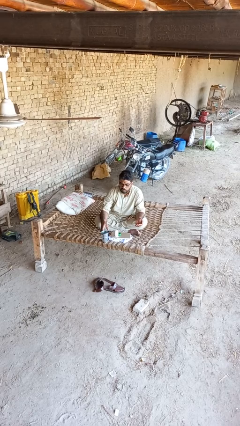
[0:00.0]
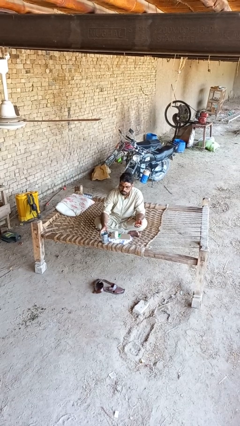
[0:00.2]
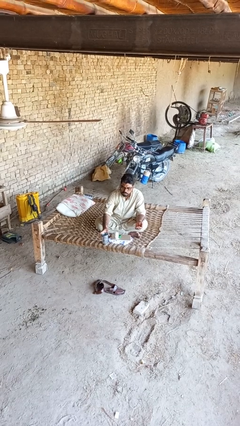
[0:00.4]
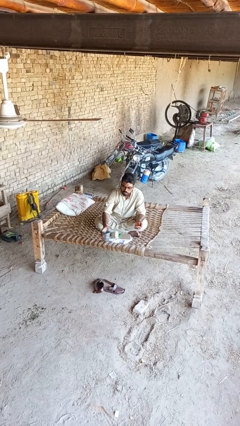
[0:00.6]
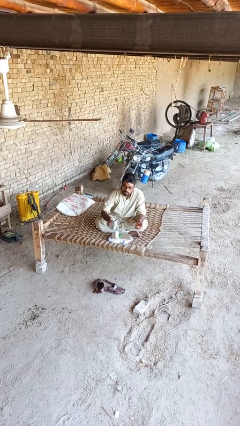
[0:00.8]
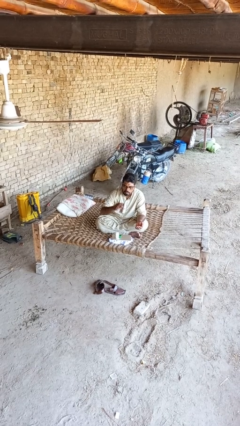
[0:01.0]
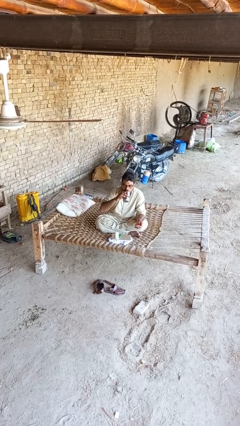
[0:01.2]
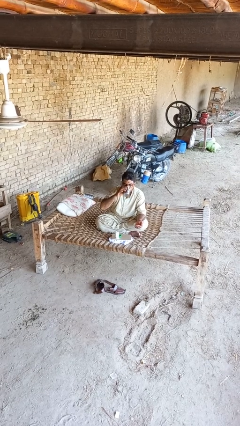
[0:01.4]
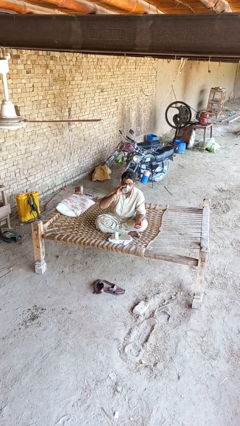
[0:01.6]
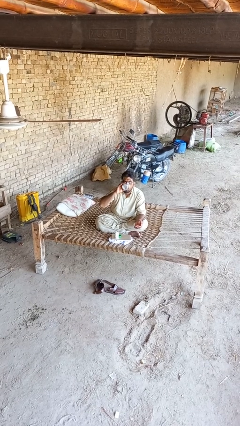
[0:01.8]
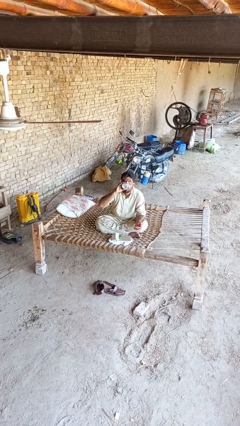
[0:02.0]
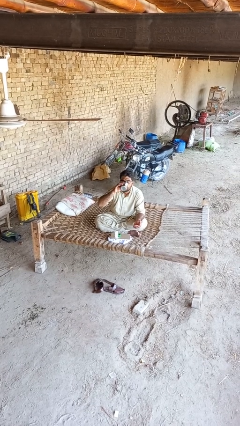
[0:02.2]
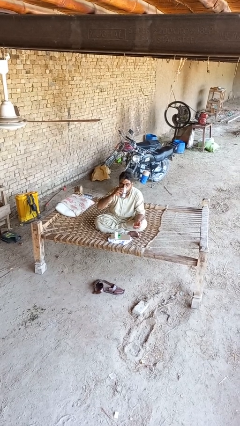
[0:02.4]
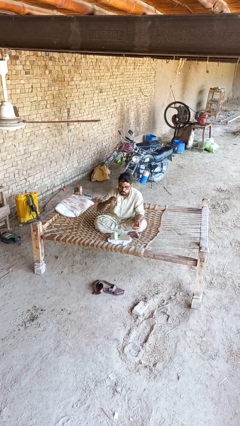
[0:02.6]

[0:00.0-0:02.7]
person drinks from cup

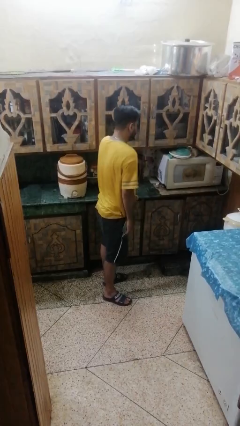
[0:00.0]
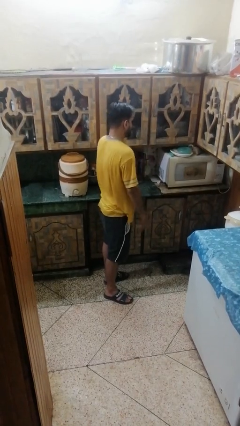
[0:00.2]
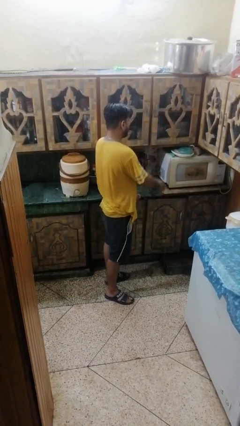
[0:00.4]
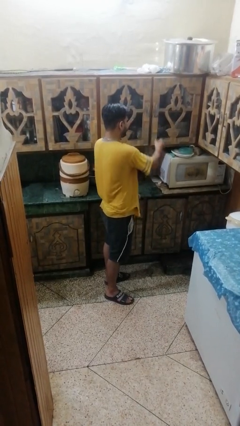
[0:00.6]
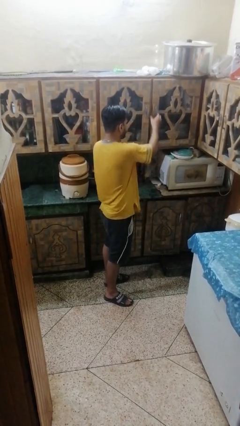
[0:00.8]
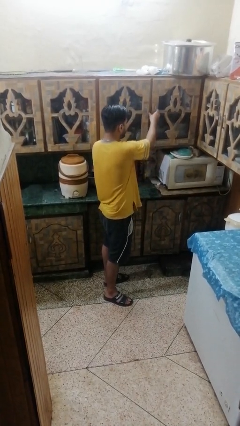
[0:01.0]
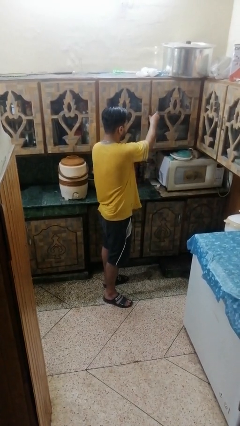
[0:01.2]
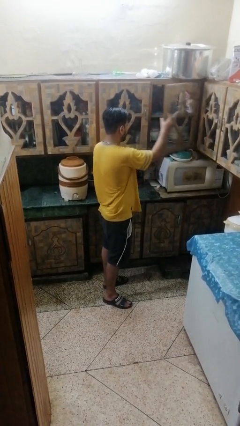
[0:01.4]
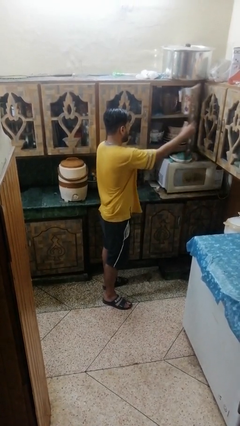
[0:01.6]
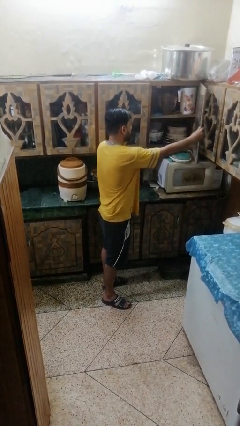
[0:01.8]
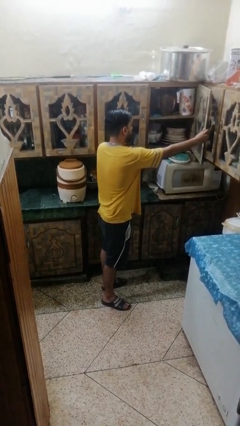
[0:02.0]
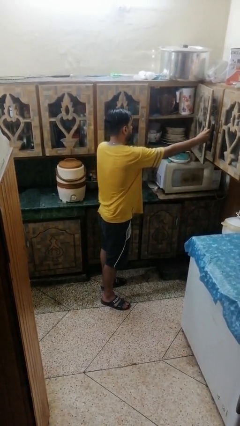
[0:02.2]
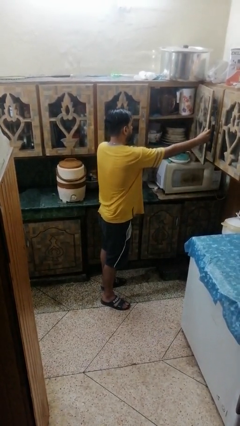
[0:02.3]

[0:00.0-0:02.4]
person closes cabinet

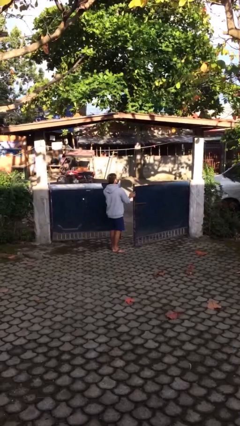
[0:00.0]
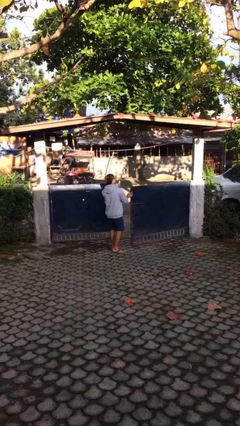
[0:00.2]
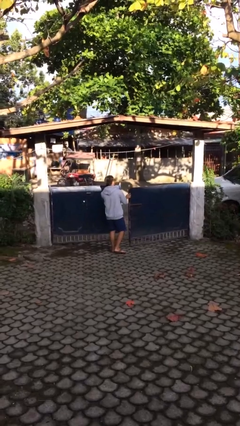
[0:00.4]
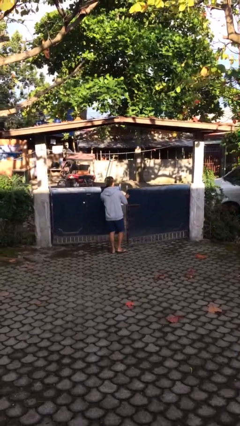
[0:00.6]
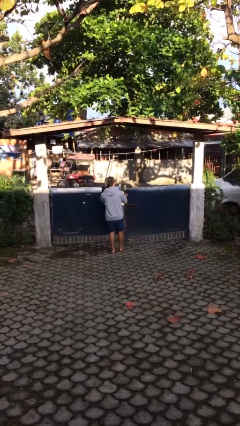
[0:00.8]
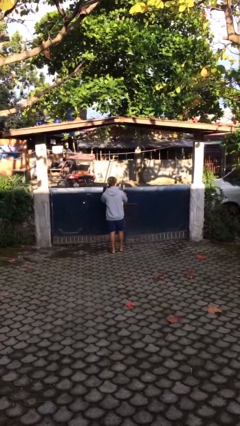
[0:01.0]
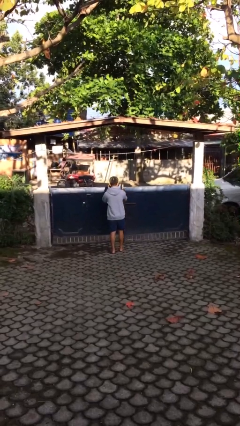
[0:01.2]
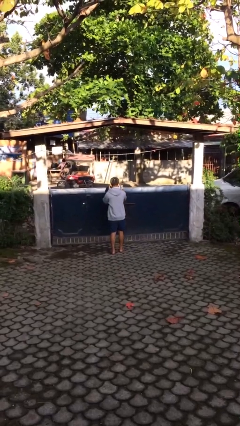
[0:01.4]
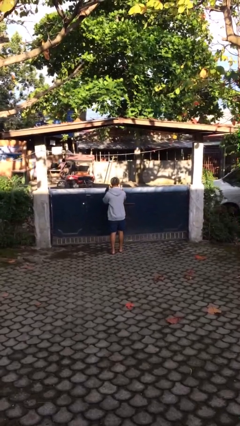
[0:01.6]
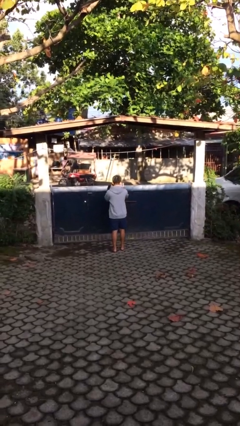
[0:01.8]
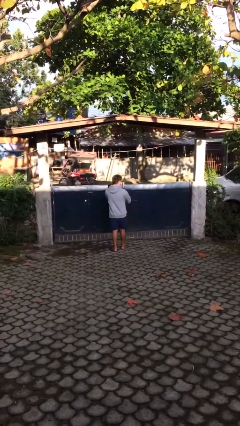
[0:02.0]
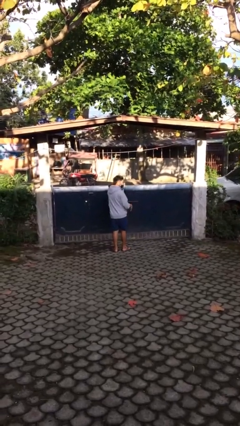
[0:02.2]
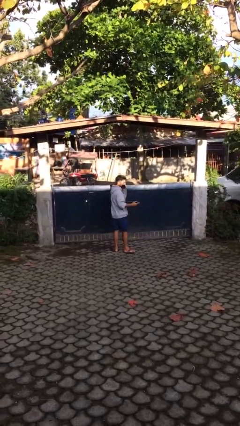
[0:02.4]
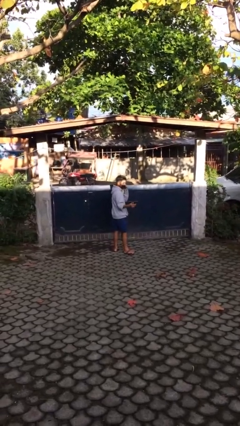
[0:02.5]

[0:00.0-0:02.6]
person closes facility door

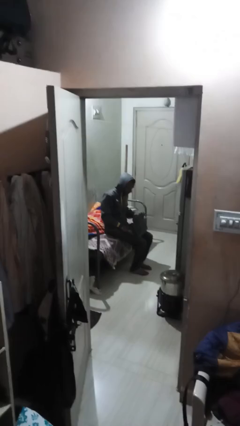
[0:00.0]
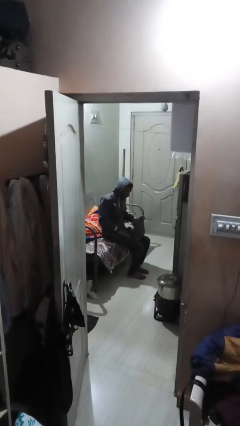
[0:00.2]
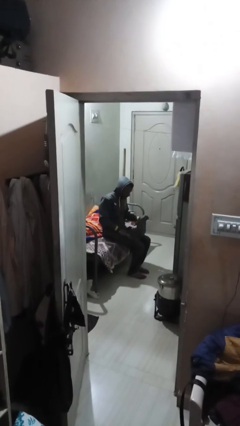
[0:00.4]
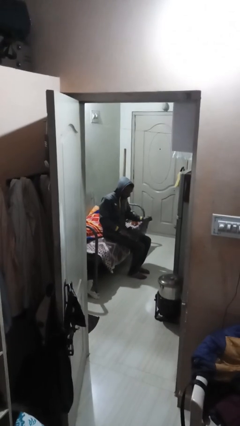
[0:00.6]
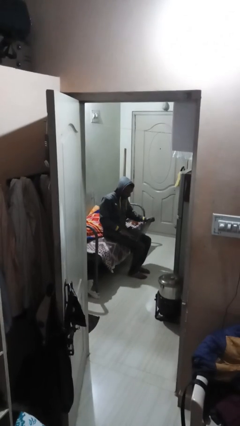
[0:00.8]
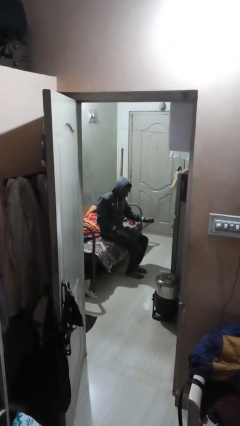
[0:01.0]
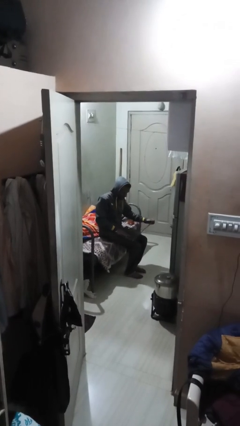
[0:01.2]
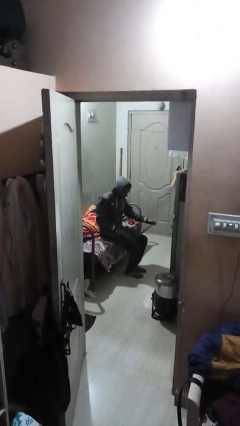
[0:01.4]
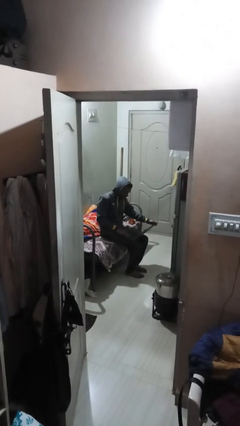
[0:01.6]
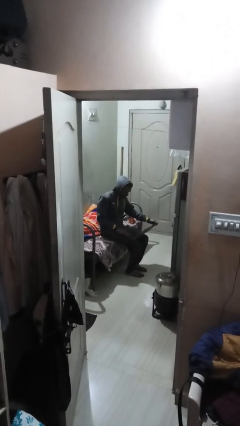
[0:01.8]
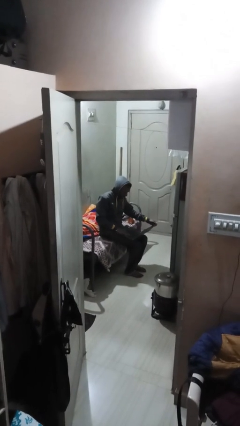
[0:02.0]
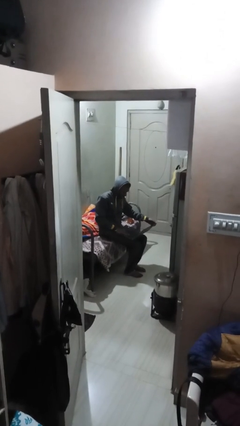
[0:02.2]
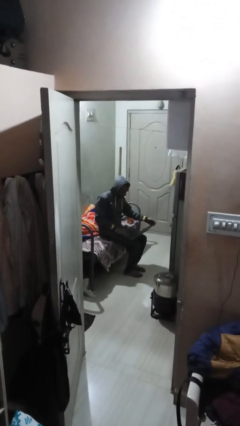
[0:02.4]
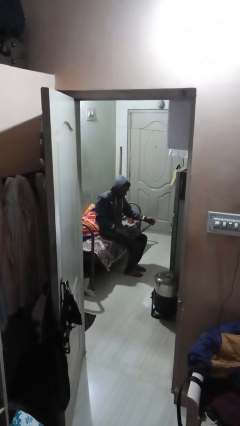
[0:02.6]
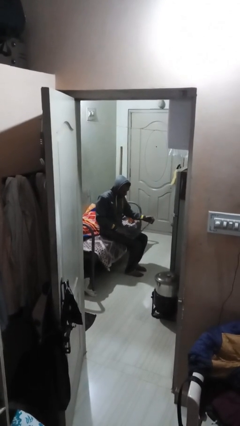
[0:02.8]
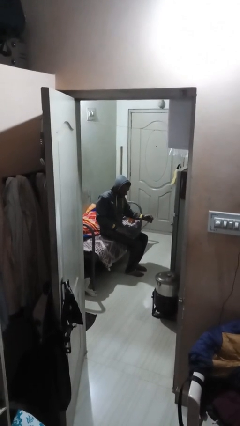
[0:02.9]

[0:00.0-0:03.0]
person interacts with laptop

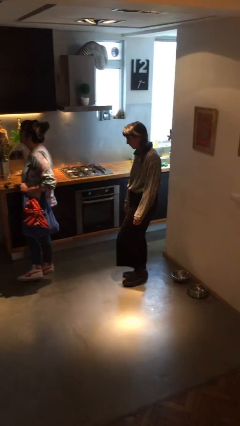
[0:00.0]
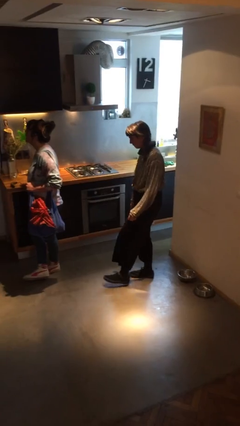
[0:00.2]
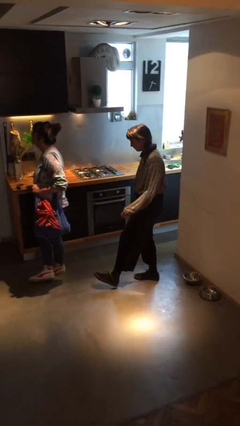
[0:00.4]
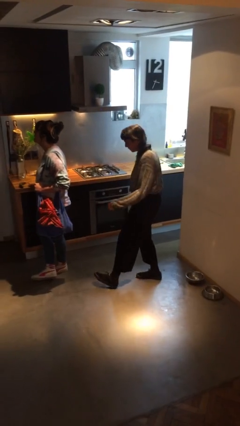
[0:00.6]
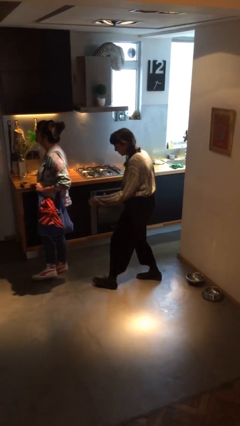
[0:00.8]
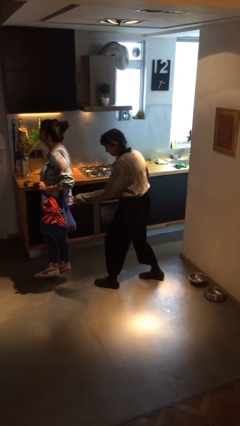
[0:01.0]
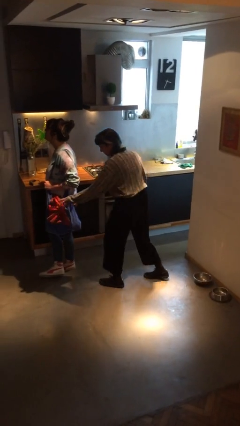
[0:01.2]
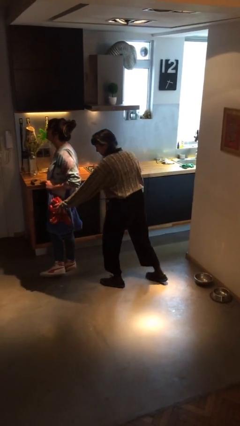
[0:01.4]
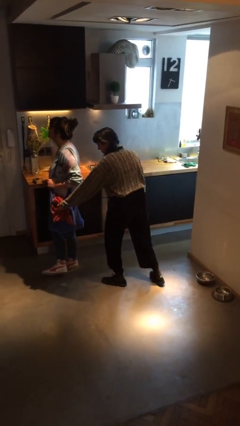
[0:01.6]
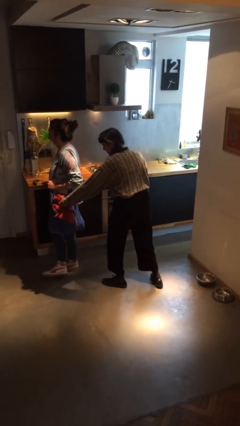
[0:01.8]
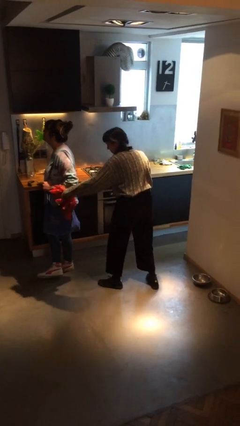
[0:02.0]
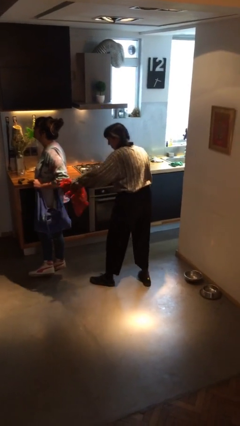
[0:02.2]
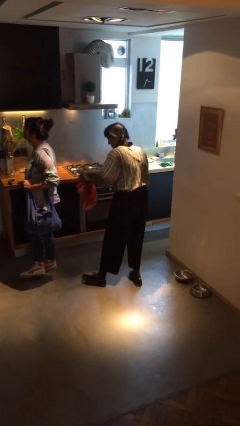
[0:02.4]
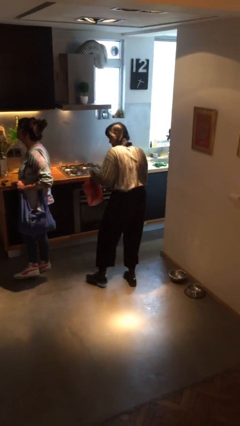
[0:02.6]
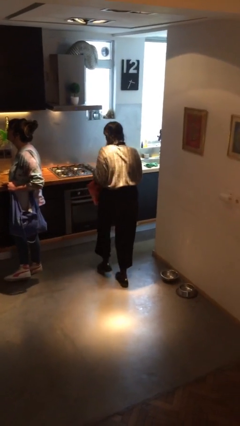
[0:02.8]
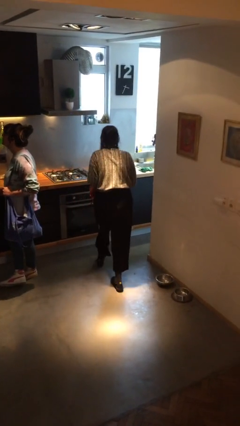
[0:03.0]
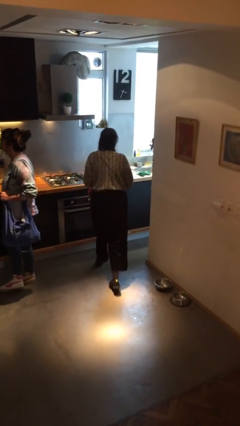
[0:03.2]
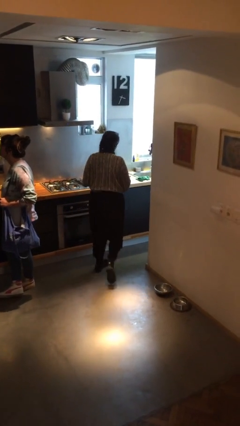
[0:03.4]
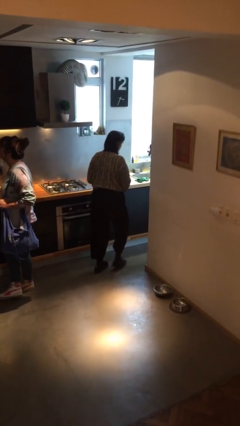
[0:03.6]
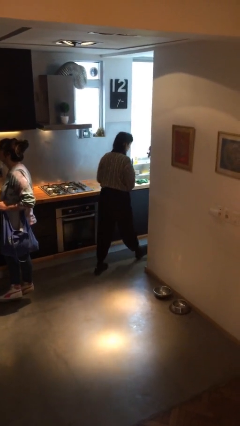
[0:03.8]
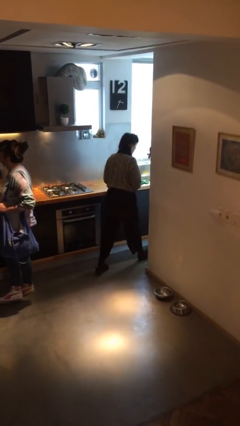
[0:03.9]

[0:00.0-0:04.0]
person steals object from person

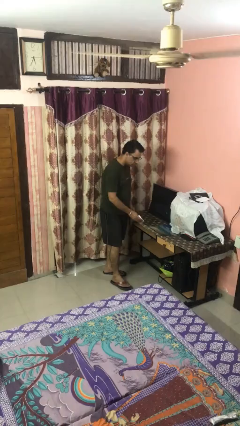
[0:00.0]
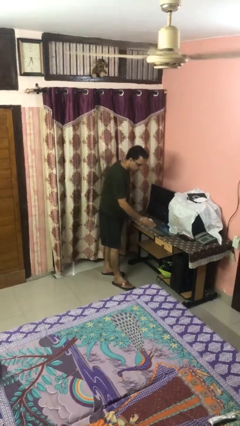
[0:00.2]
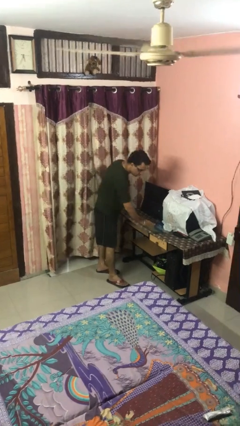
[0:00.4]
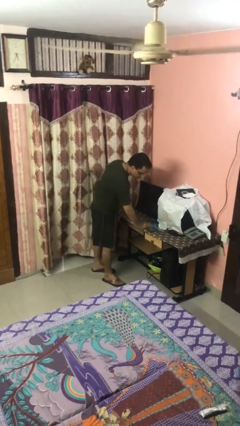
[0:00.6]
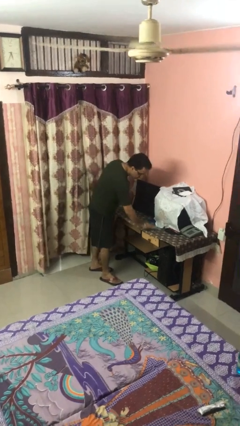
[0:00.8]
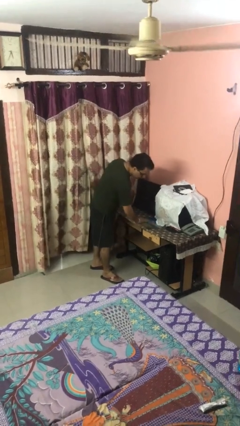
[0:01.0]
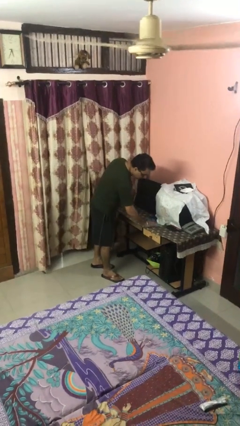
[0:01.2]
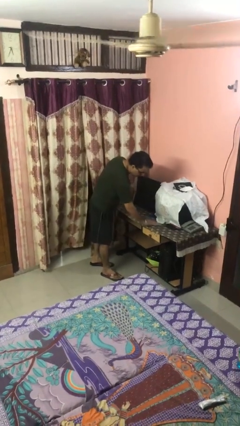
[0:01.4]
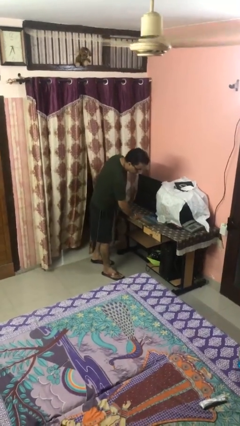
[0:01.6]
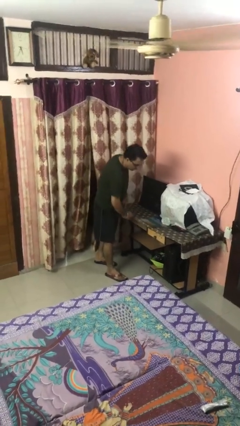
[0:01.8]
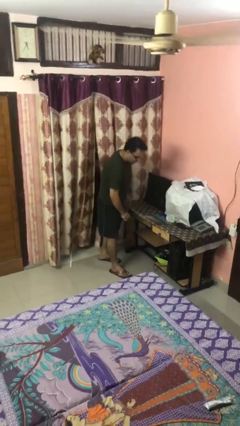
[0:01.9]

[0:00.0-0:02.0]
person cleans table with rag

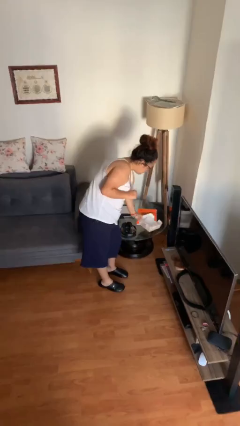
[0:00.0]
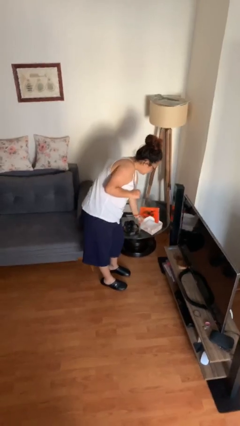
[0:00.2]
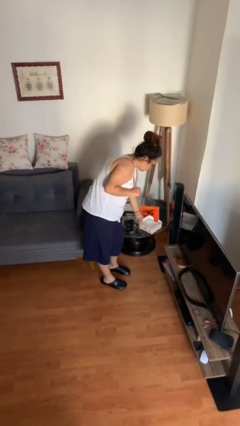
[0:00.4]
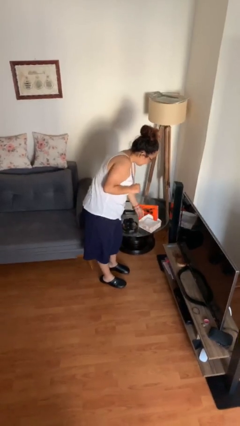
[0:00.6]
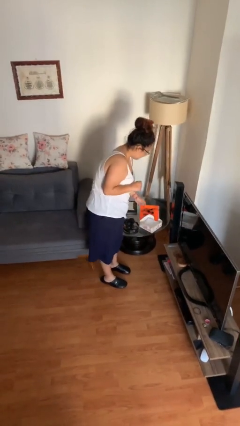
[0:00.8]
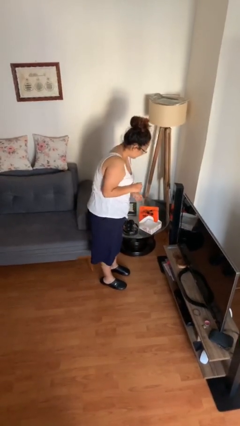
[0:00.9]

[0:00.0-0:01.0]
person puts down object on table
